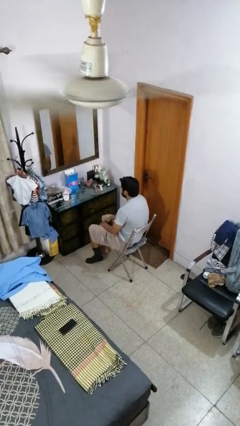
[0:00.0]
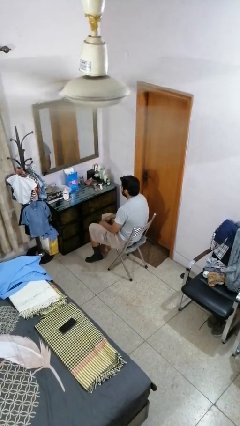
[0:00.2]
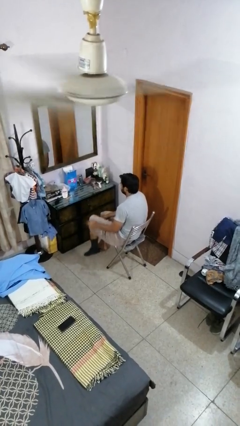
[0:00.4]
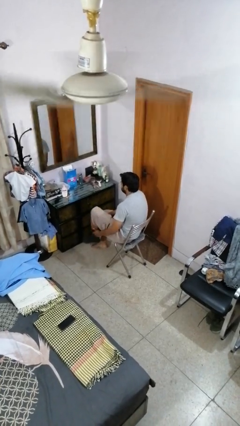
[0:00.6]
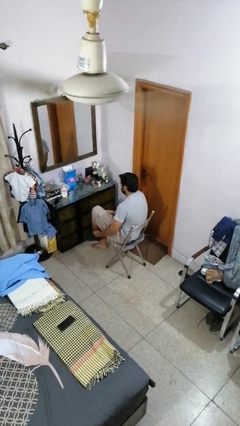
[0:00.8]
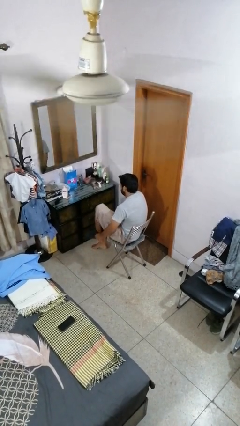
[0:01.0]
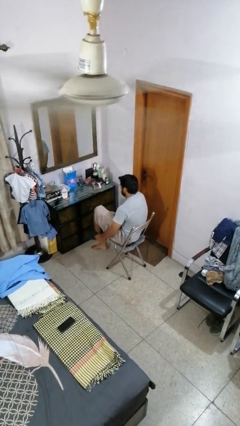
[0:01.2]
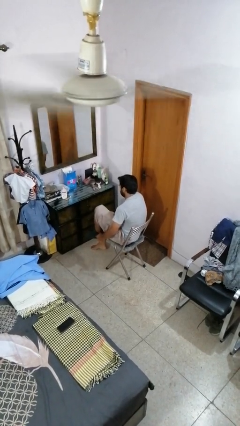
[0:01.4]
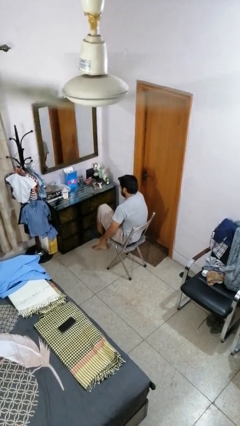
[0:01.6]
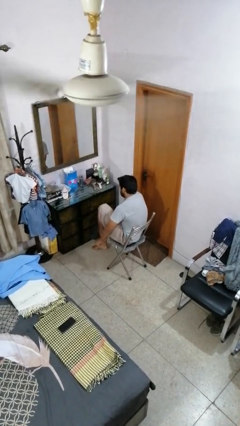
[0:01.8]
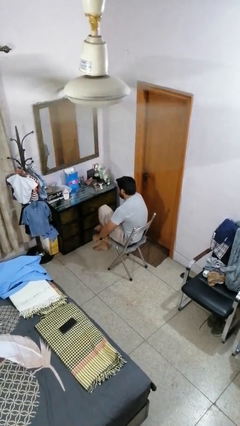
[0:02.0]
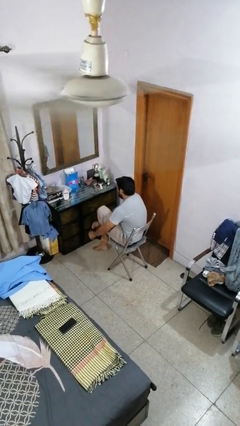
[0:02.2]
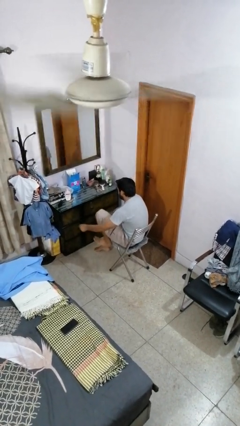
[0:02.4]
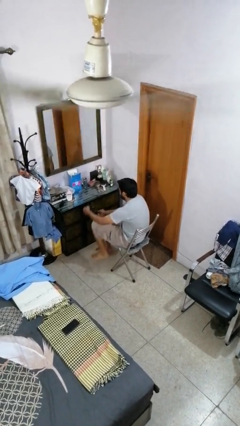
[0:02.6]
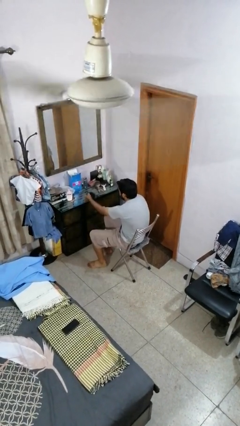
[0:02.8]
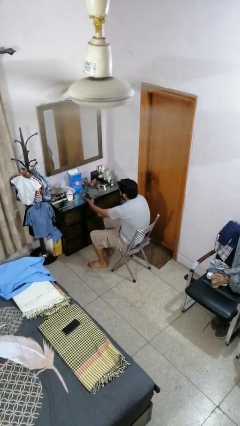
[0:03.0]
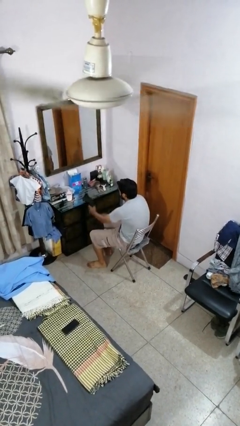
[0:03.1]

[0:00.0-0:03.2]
person takes off socks

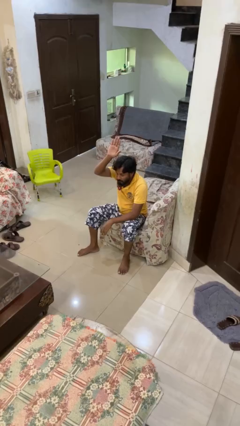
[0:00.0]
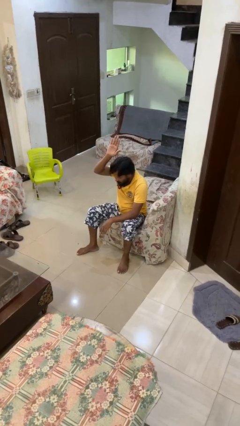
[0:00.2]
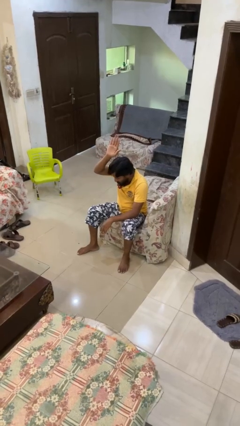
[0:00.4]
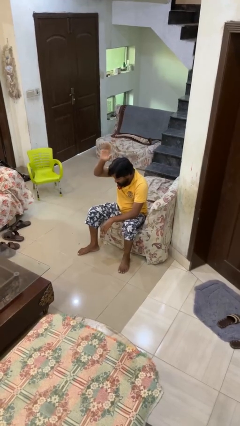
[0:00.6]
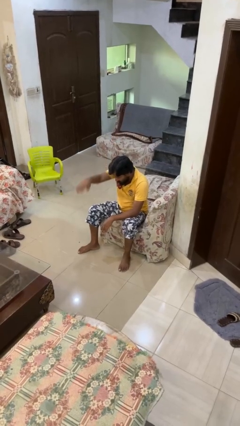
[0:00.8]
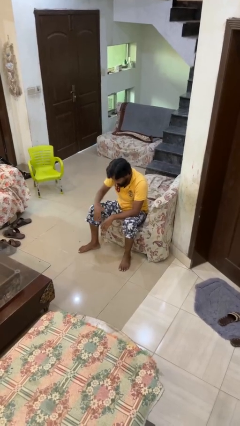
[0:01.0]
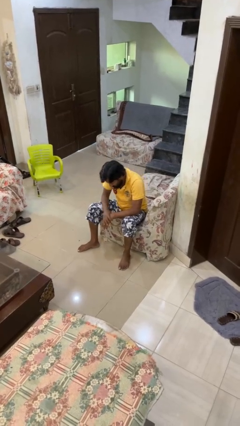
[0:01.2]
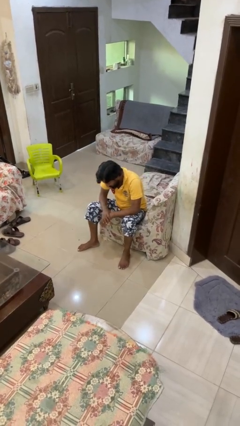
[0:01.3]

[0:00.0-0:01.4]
person gestures lower hand

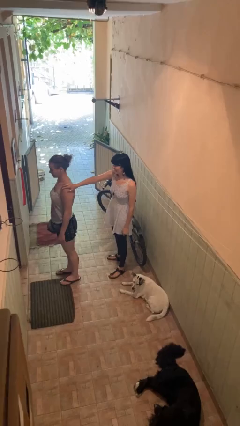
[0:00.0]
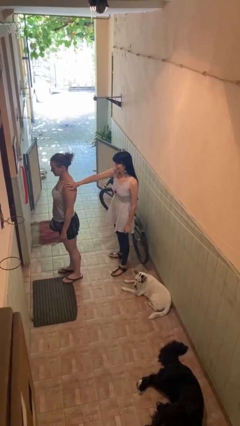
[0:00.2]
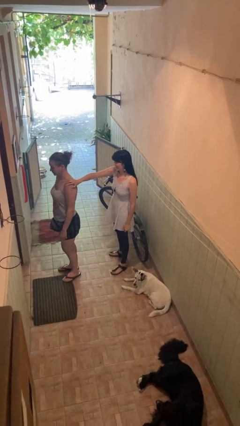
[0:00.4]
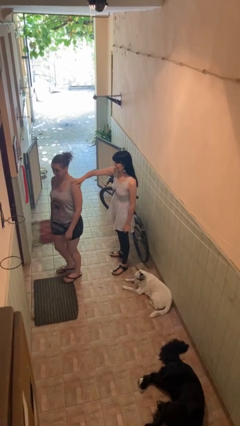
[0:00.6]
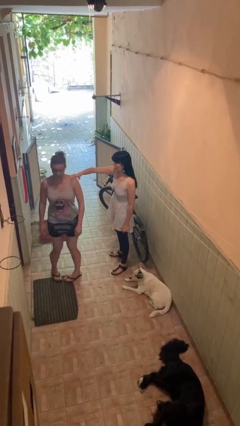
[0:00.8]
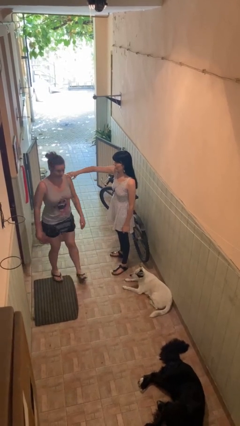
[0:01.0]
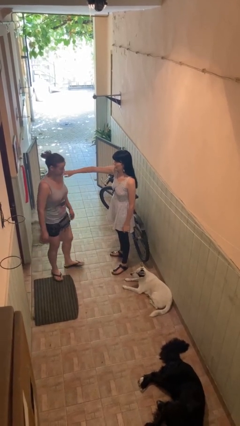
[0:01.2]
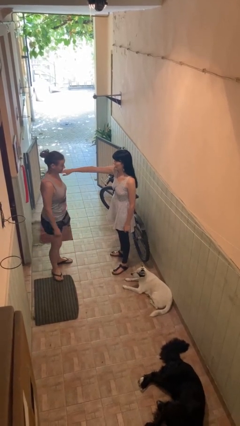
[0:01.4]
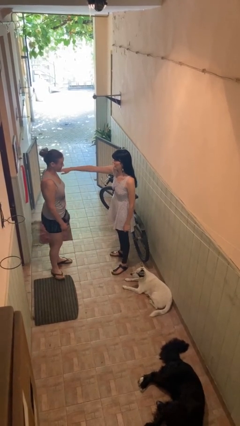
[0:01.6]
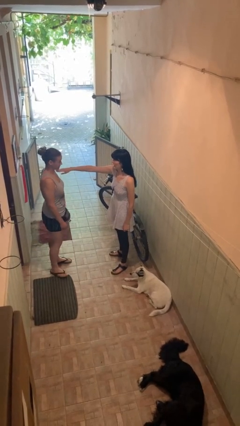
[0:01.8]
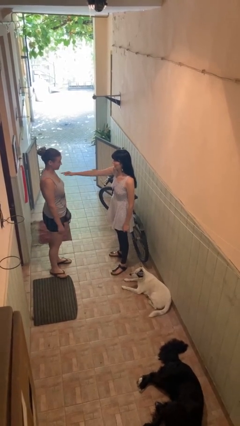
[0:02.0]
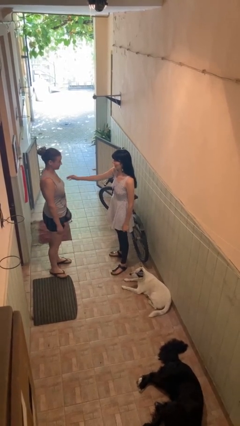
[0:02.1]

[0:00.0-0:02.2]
person spins person around

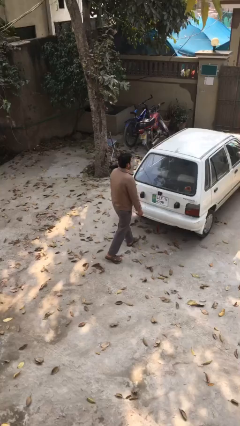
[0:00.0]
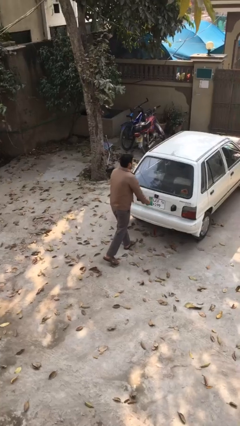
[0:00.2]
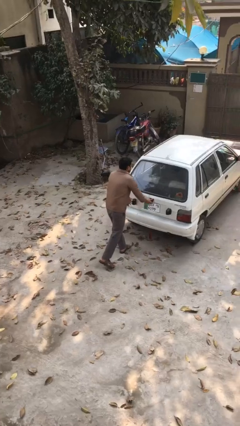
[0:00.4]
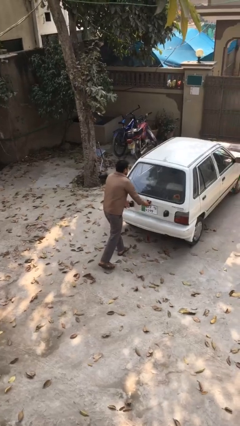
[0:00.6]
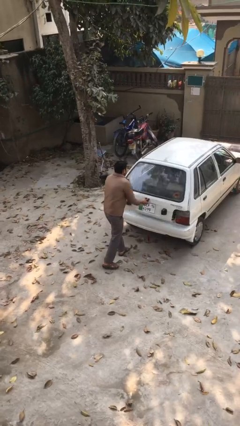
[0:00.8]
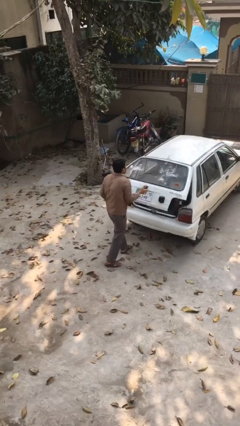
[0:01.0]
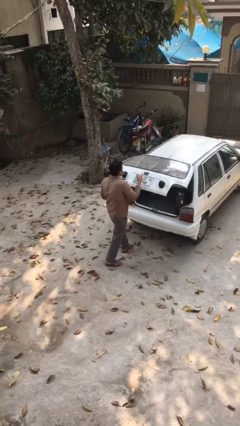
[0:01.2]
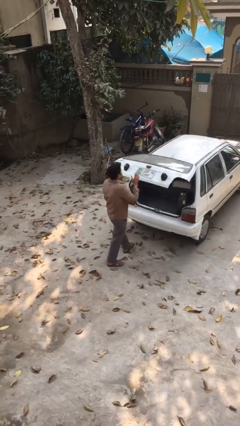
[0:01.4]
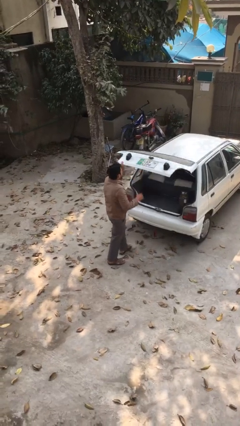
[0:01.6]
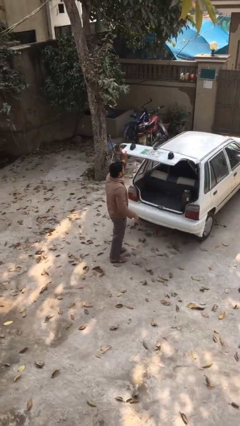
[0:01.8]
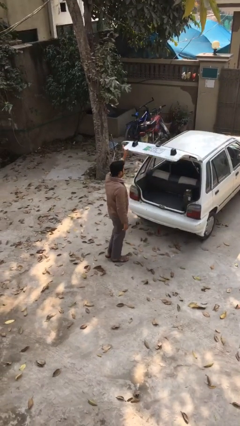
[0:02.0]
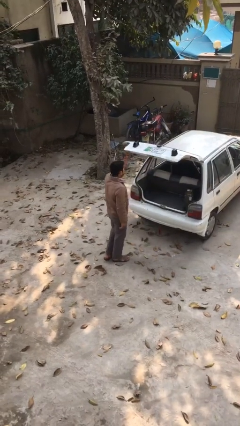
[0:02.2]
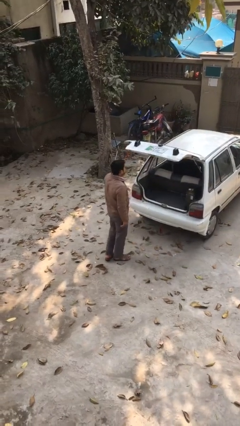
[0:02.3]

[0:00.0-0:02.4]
person opens car trunk

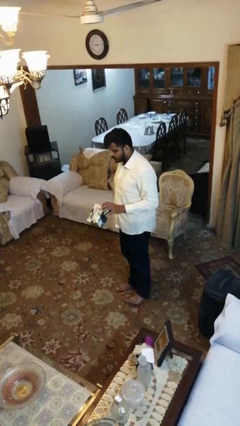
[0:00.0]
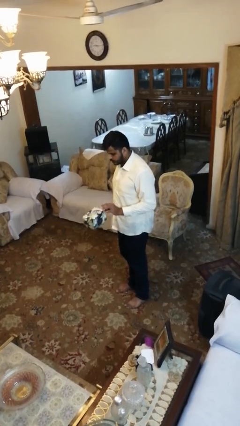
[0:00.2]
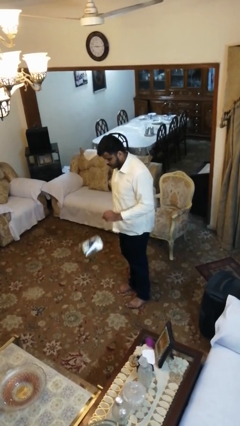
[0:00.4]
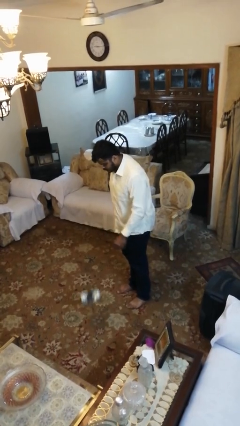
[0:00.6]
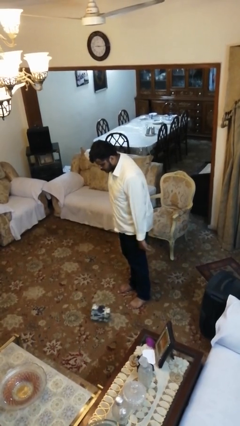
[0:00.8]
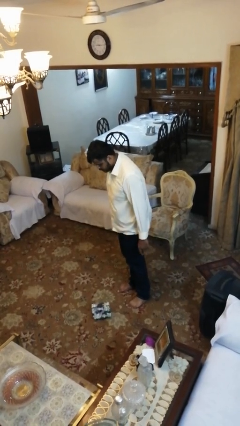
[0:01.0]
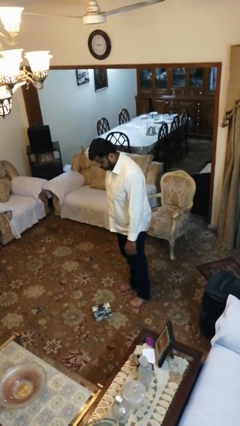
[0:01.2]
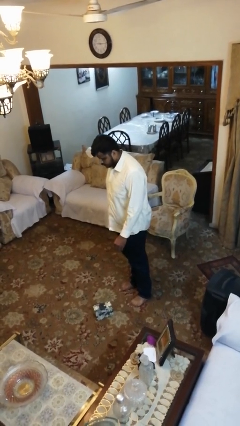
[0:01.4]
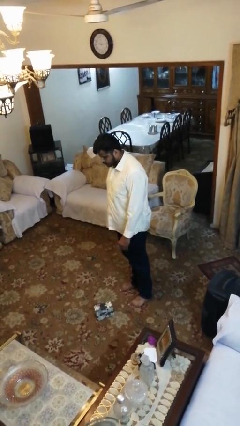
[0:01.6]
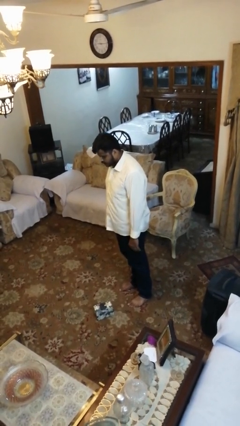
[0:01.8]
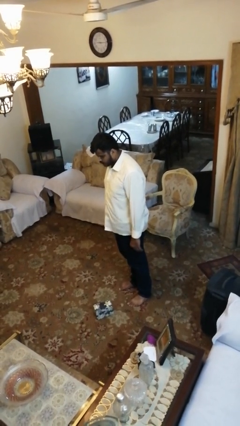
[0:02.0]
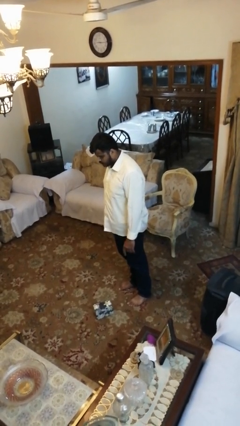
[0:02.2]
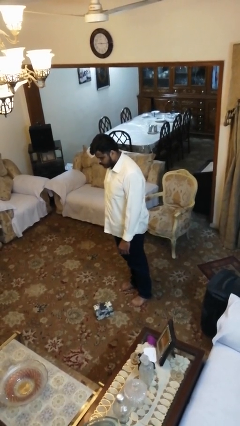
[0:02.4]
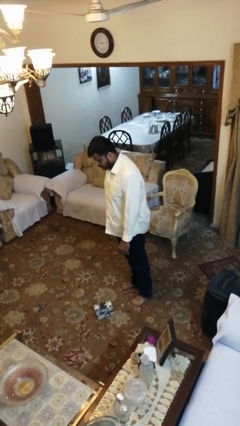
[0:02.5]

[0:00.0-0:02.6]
person drops object

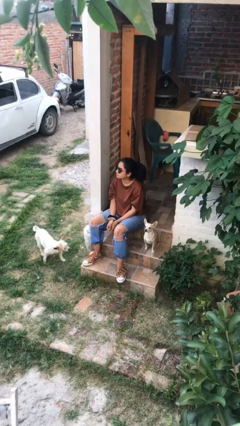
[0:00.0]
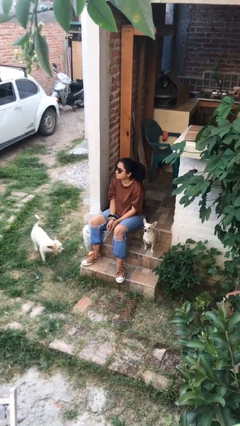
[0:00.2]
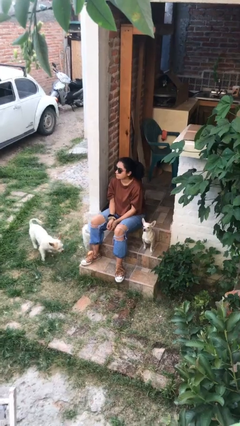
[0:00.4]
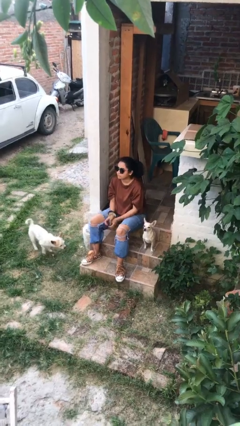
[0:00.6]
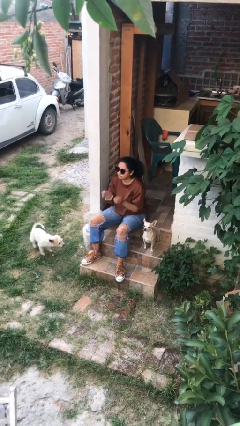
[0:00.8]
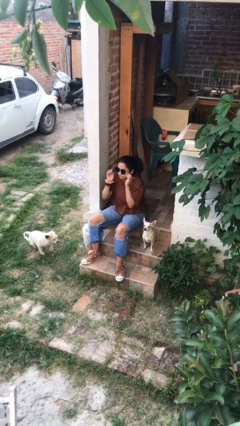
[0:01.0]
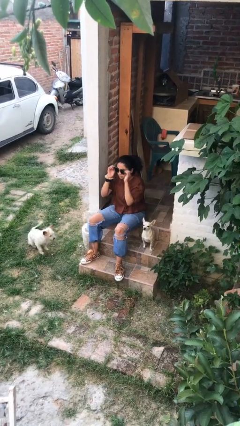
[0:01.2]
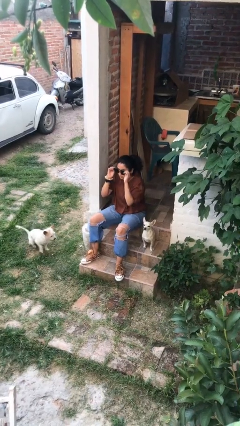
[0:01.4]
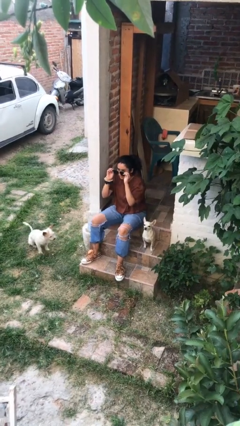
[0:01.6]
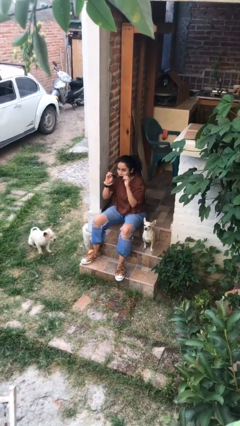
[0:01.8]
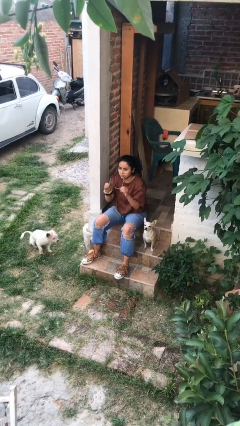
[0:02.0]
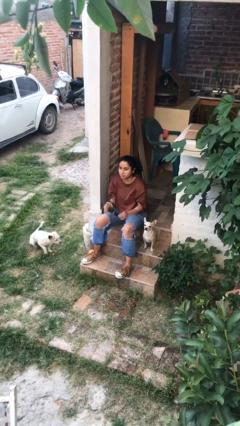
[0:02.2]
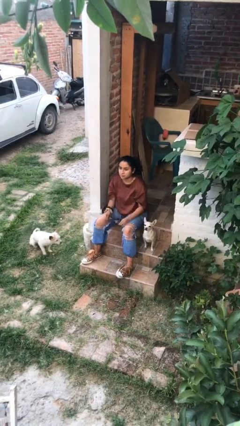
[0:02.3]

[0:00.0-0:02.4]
person takes off sunglasses

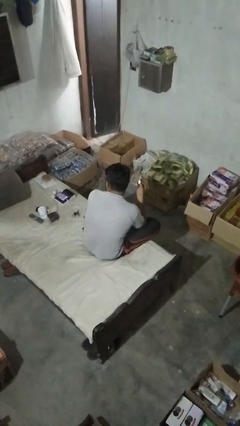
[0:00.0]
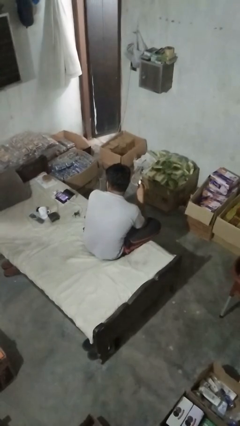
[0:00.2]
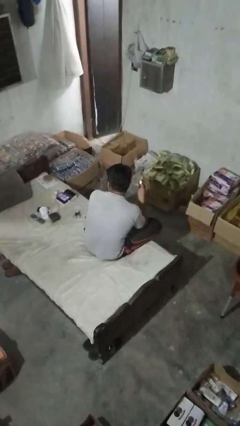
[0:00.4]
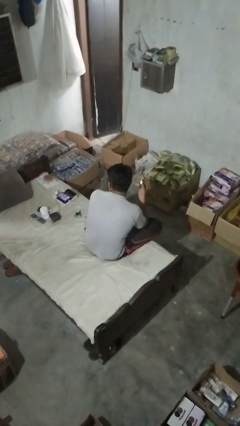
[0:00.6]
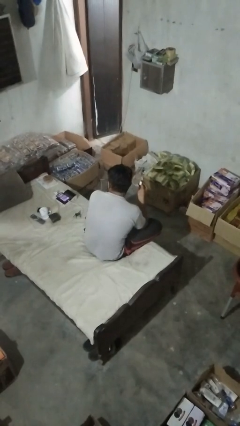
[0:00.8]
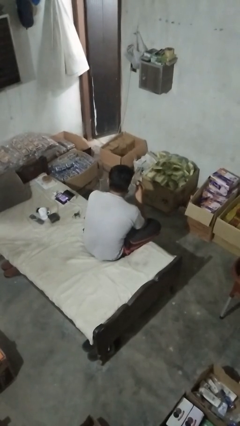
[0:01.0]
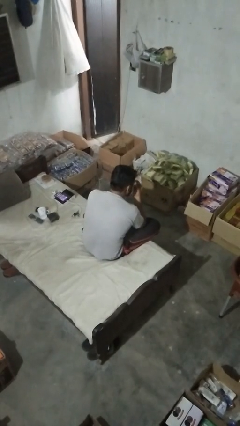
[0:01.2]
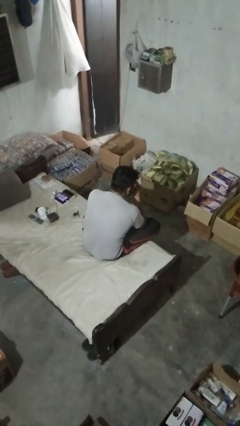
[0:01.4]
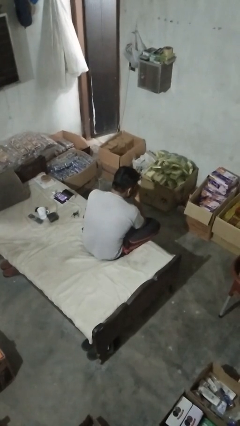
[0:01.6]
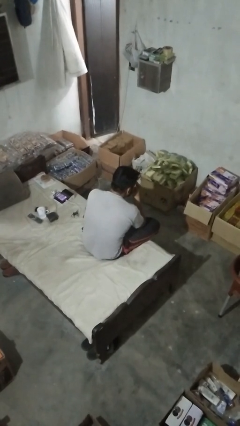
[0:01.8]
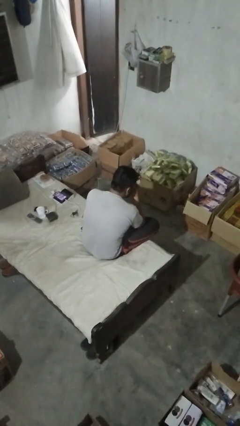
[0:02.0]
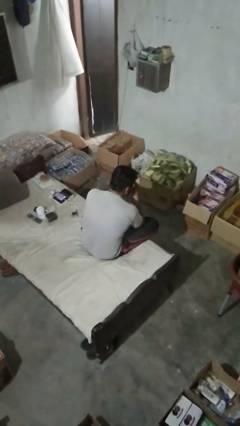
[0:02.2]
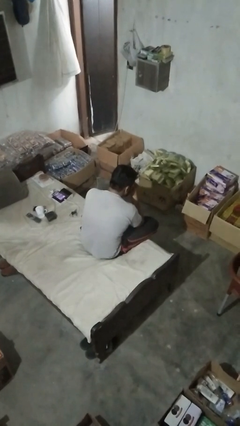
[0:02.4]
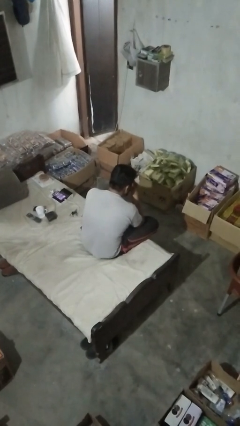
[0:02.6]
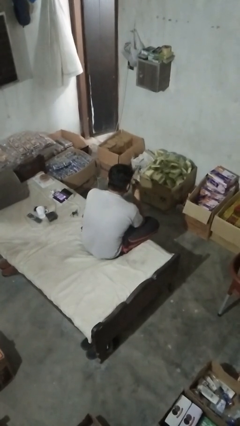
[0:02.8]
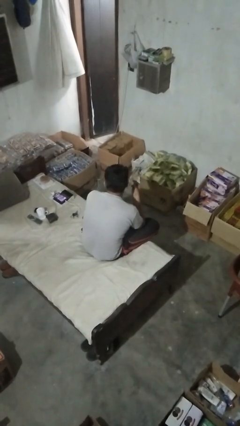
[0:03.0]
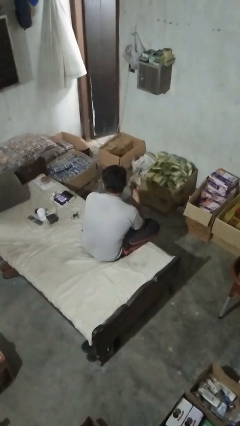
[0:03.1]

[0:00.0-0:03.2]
person blows nose
